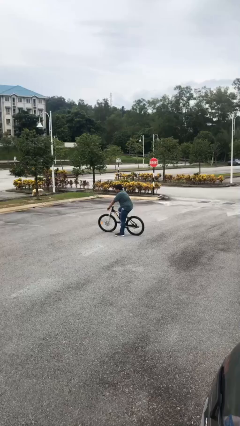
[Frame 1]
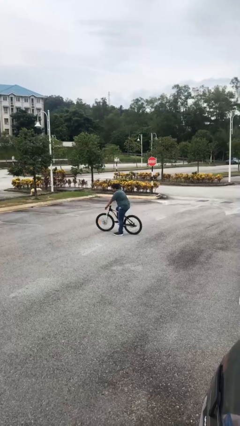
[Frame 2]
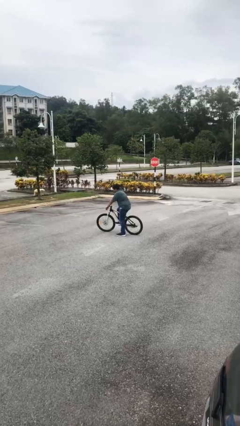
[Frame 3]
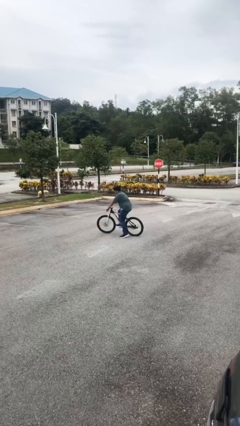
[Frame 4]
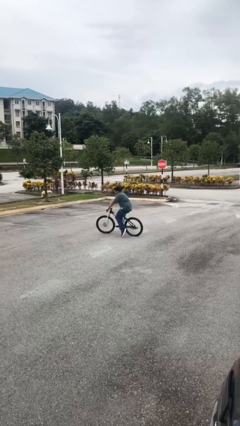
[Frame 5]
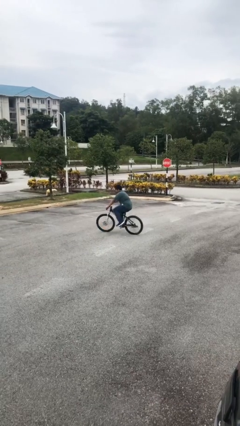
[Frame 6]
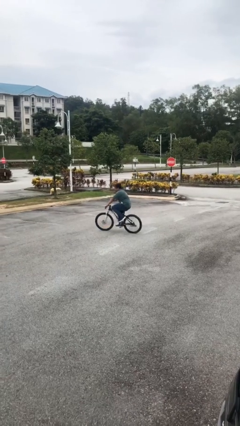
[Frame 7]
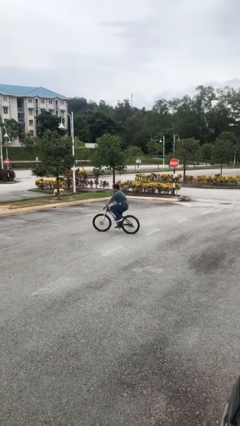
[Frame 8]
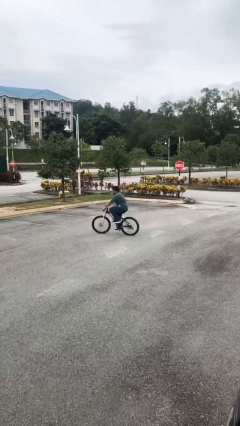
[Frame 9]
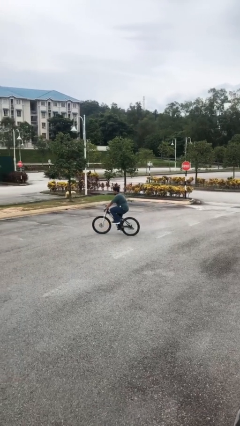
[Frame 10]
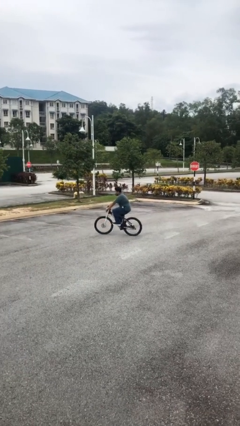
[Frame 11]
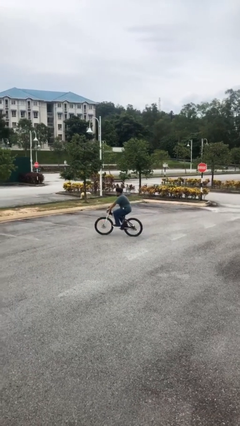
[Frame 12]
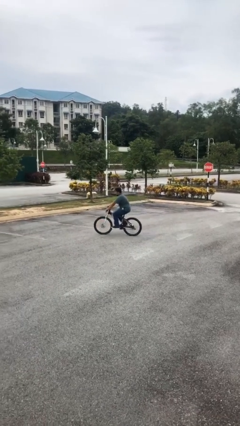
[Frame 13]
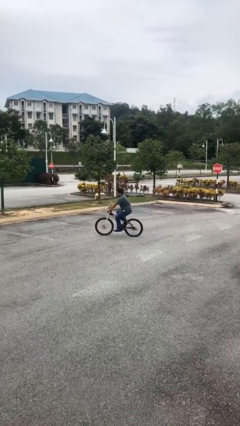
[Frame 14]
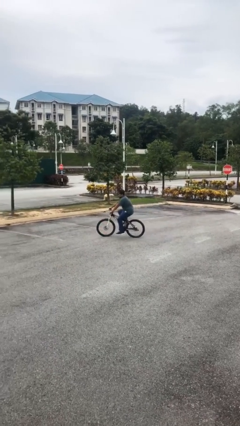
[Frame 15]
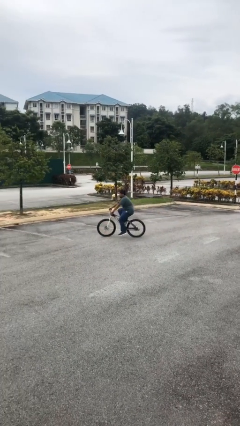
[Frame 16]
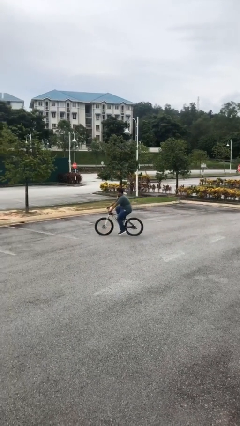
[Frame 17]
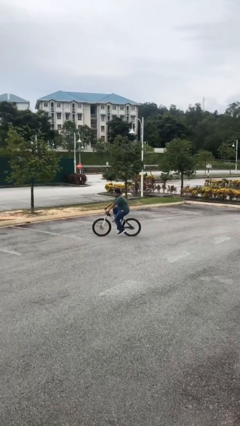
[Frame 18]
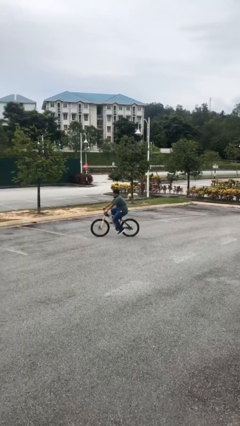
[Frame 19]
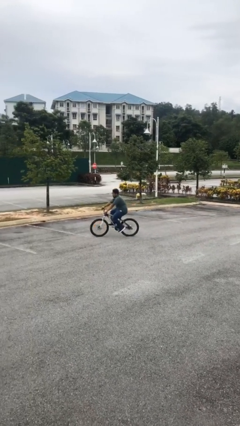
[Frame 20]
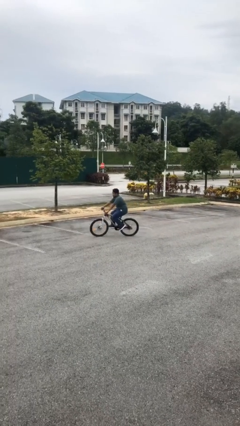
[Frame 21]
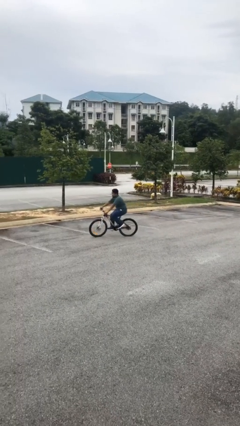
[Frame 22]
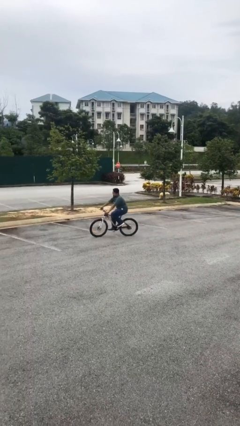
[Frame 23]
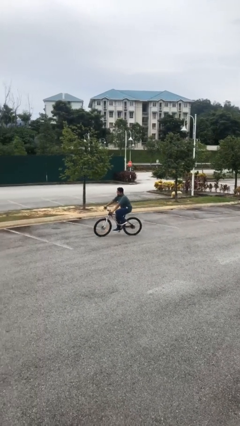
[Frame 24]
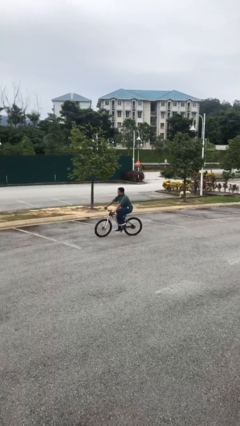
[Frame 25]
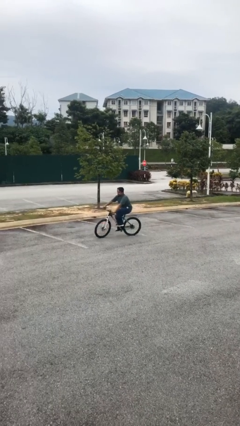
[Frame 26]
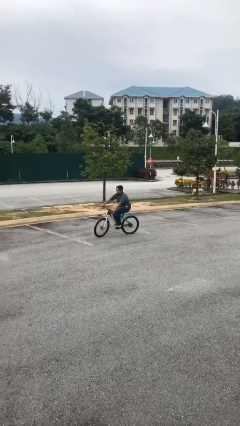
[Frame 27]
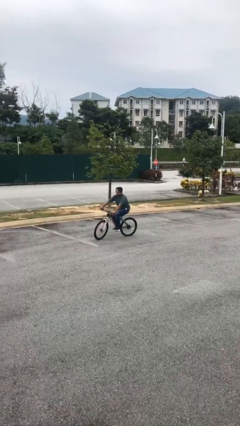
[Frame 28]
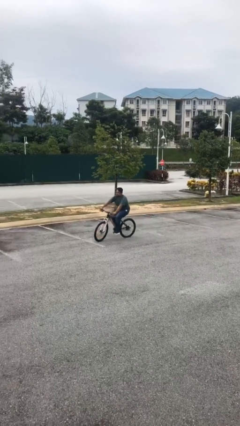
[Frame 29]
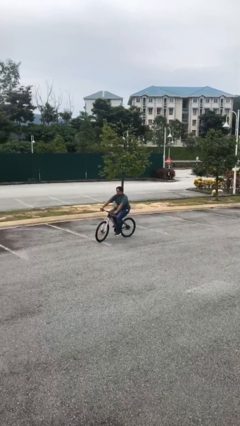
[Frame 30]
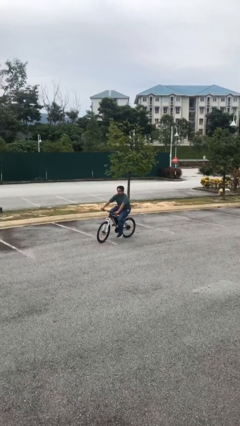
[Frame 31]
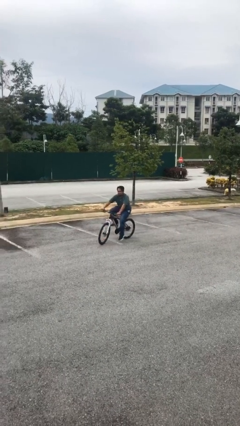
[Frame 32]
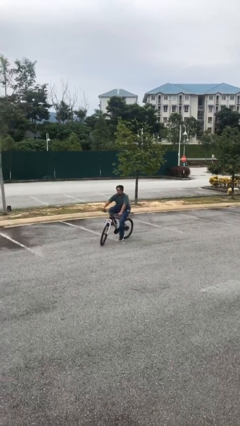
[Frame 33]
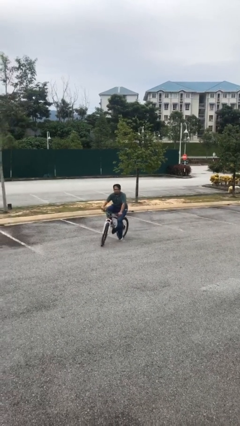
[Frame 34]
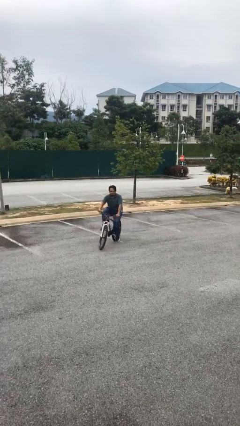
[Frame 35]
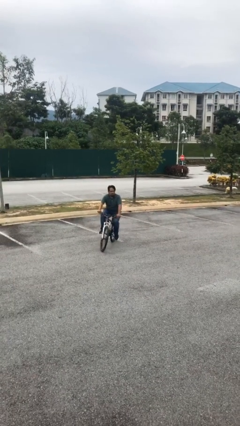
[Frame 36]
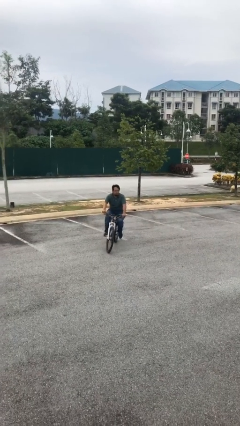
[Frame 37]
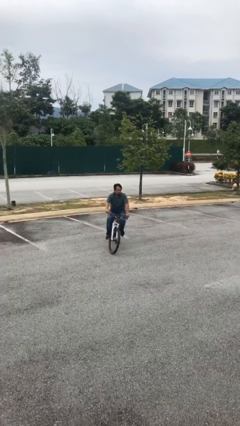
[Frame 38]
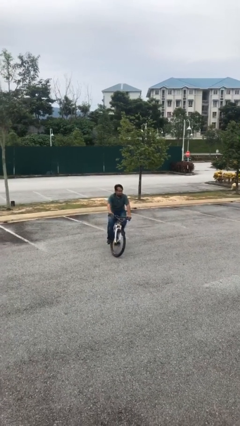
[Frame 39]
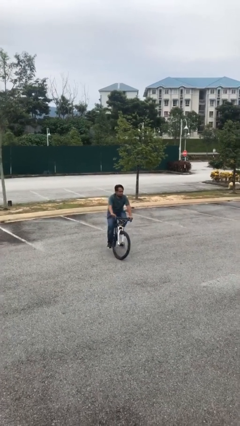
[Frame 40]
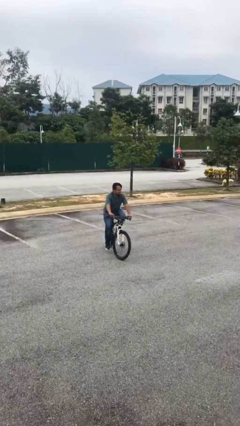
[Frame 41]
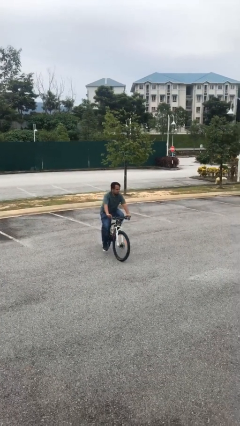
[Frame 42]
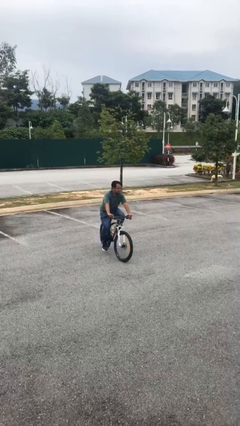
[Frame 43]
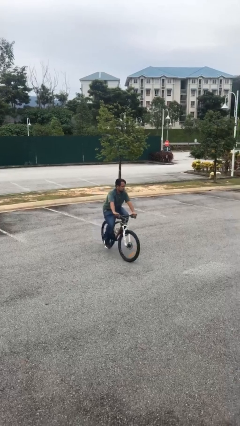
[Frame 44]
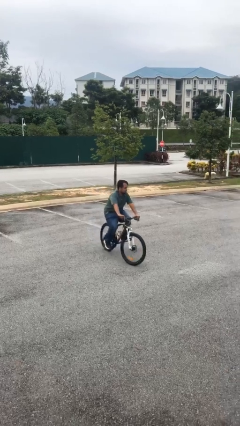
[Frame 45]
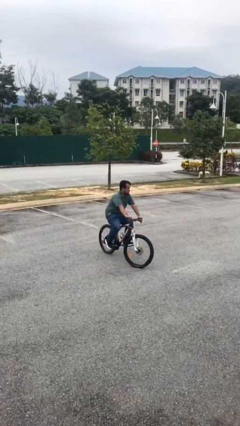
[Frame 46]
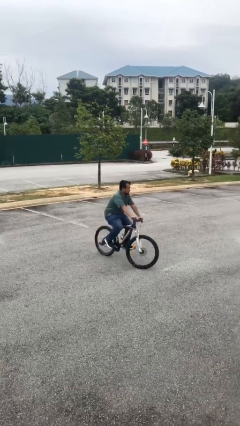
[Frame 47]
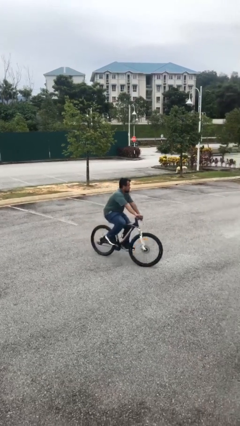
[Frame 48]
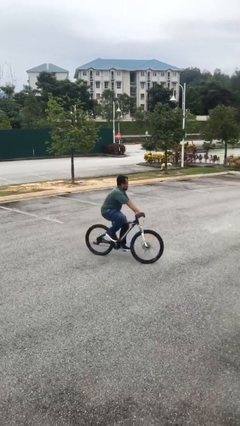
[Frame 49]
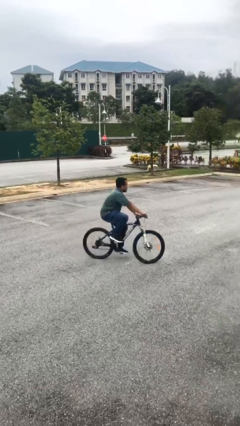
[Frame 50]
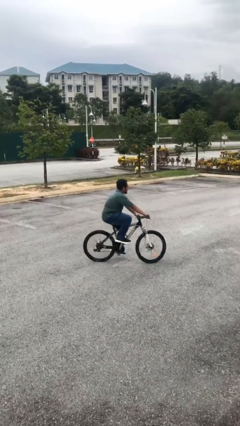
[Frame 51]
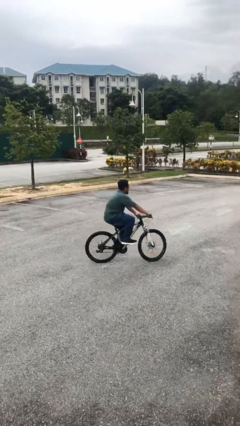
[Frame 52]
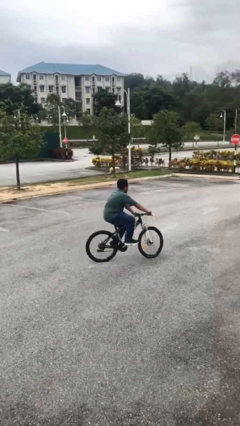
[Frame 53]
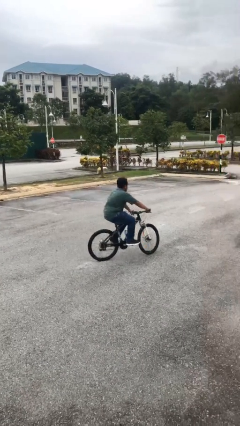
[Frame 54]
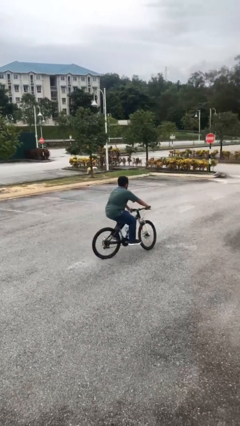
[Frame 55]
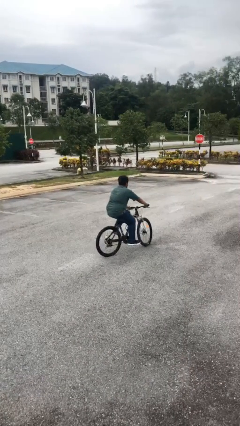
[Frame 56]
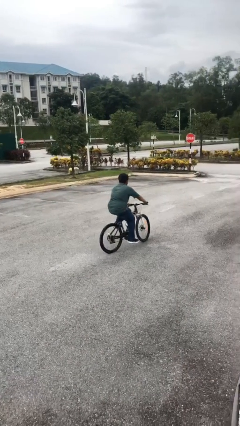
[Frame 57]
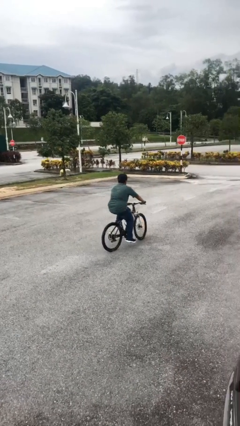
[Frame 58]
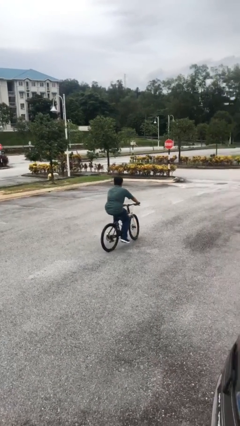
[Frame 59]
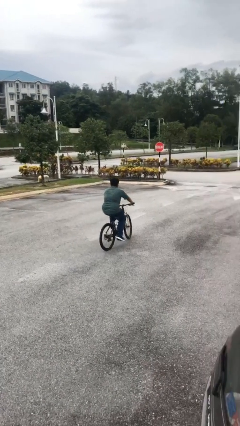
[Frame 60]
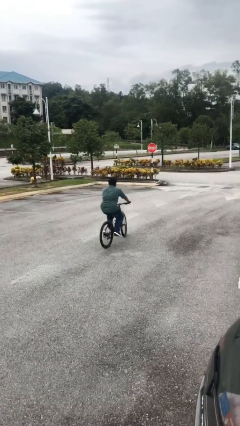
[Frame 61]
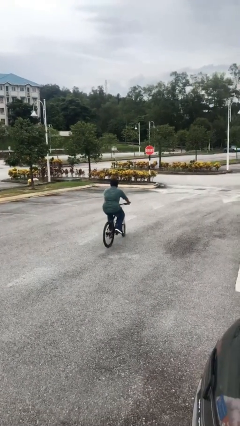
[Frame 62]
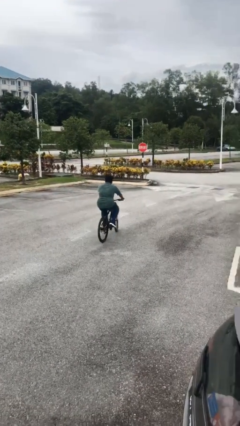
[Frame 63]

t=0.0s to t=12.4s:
person rides bicycle

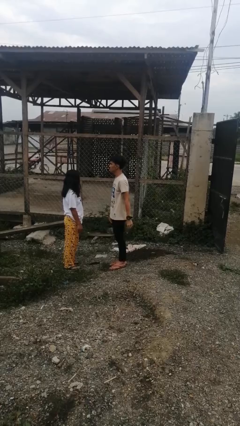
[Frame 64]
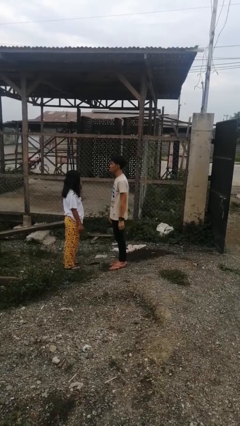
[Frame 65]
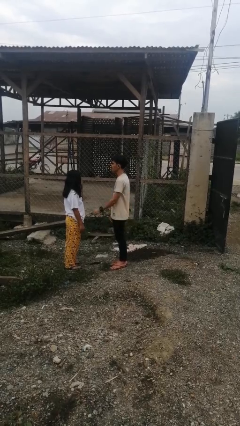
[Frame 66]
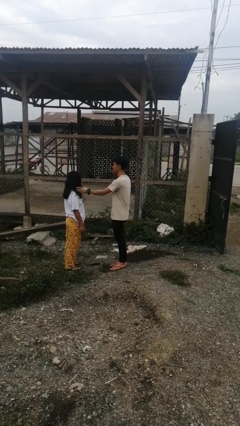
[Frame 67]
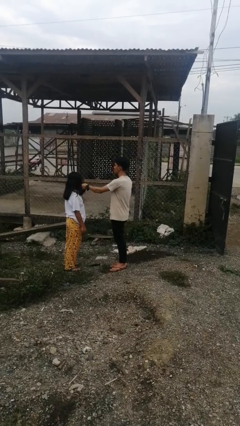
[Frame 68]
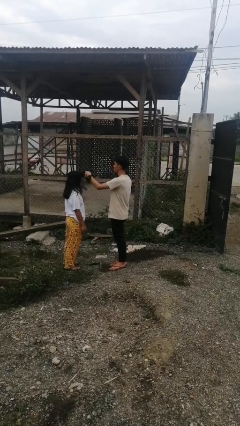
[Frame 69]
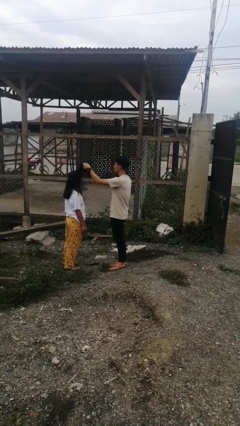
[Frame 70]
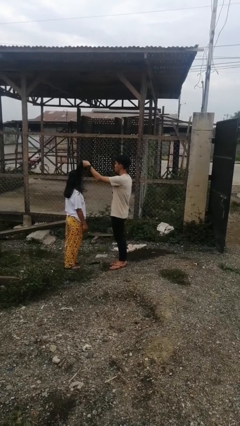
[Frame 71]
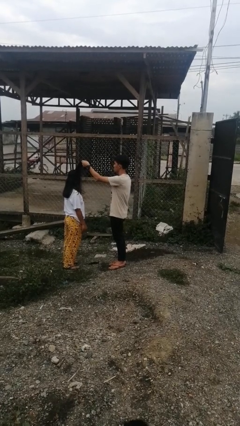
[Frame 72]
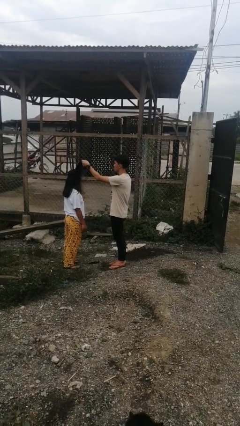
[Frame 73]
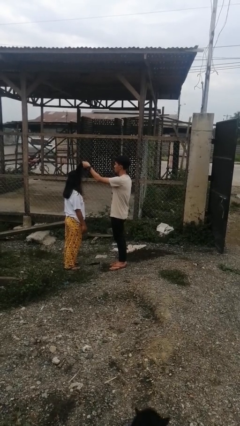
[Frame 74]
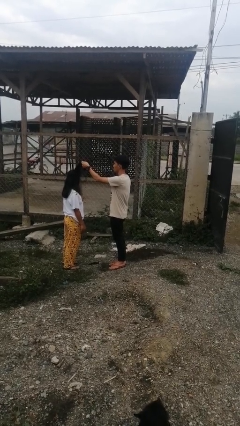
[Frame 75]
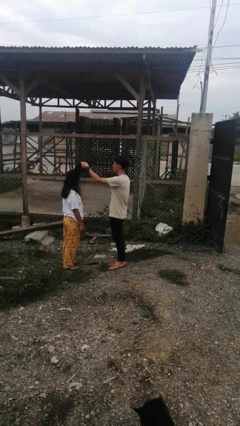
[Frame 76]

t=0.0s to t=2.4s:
person grabs person by hair

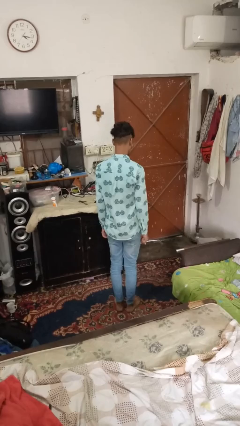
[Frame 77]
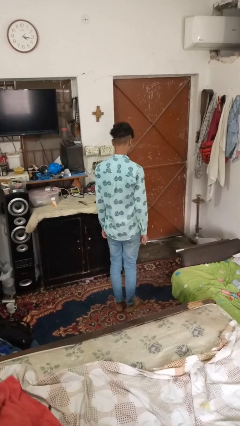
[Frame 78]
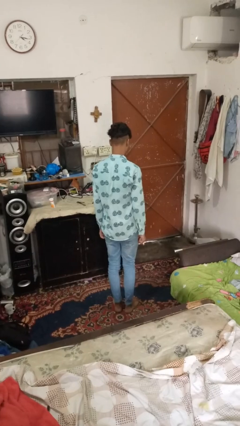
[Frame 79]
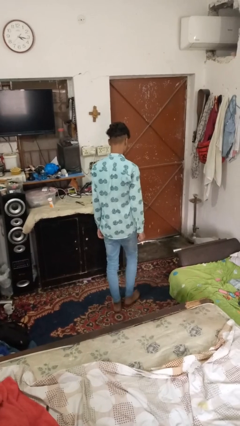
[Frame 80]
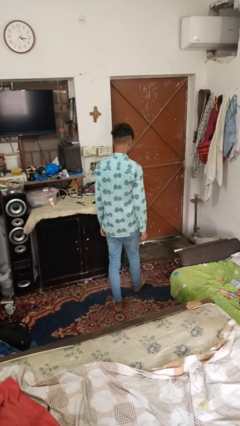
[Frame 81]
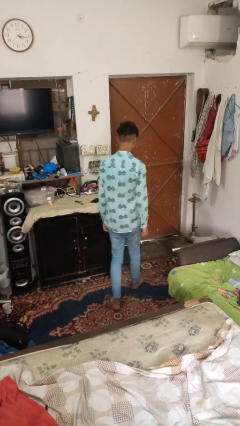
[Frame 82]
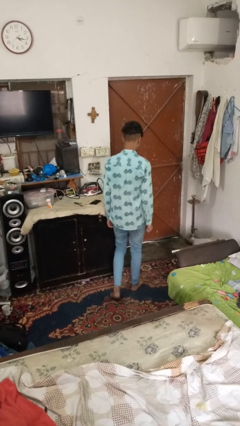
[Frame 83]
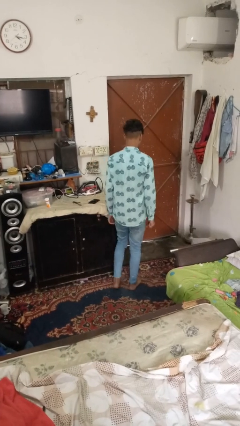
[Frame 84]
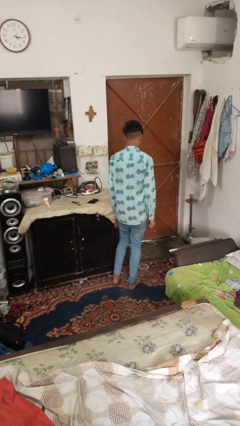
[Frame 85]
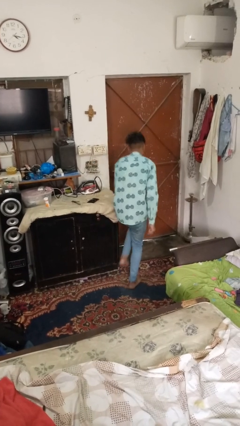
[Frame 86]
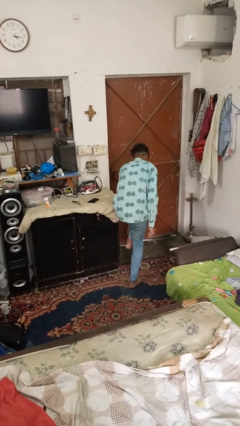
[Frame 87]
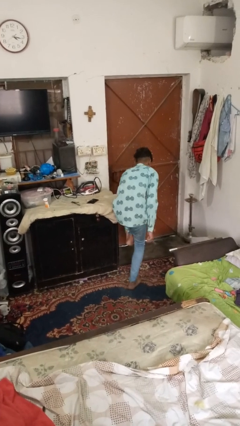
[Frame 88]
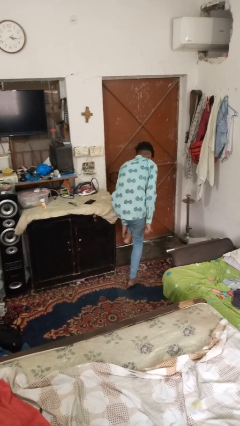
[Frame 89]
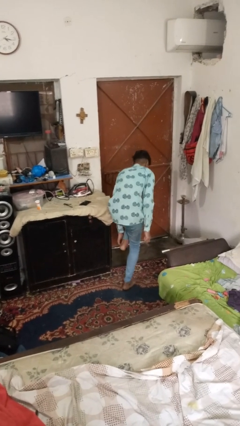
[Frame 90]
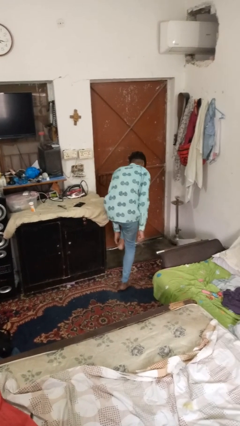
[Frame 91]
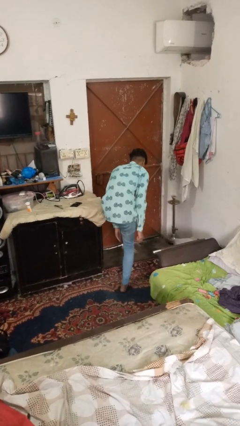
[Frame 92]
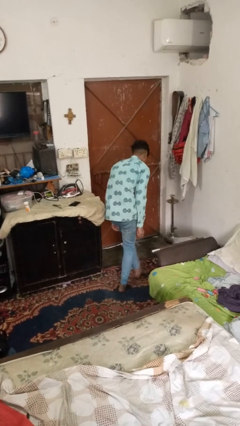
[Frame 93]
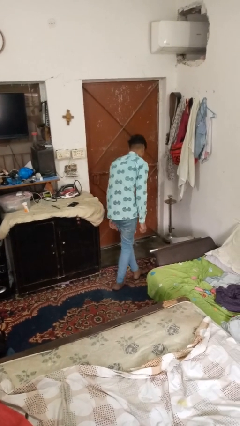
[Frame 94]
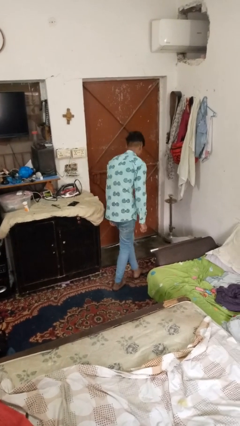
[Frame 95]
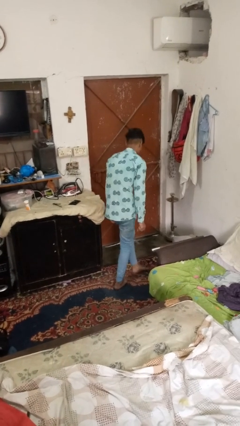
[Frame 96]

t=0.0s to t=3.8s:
person stubs toe
